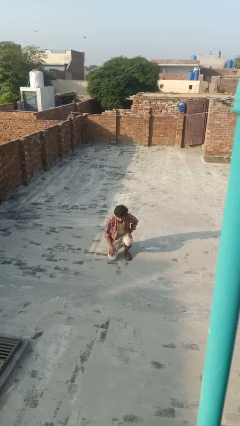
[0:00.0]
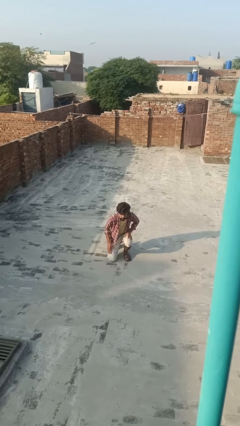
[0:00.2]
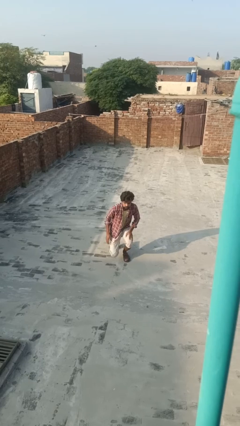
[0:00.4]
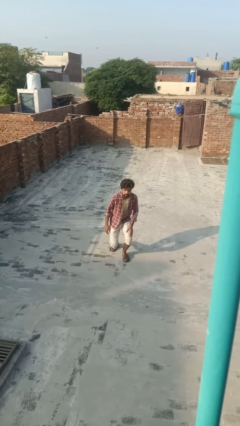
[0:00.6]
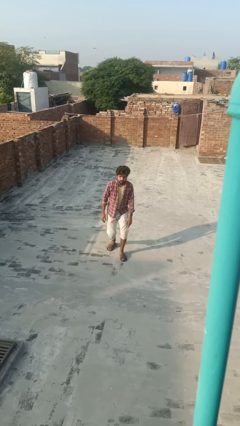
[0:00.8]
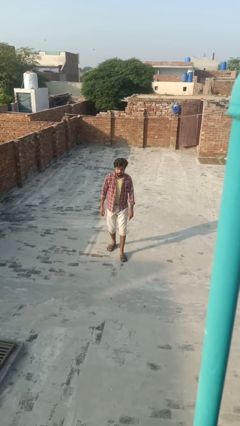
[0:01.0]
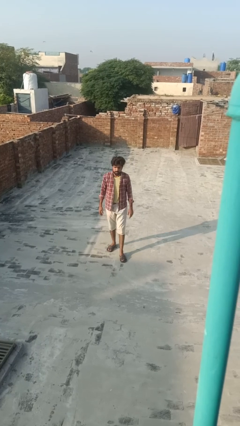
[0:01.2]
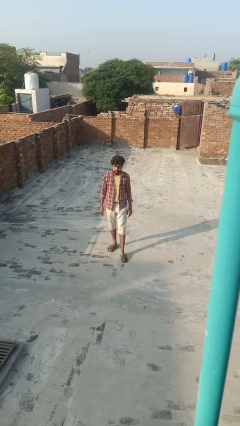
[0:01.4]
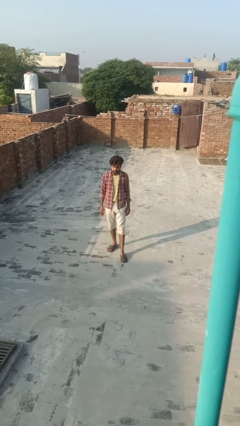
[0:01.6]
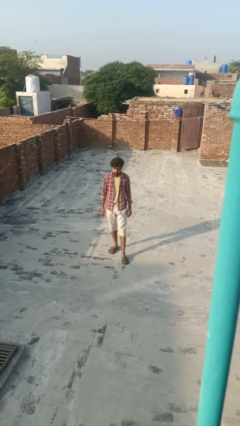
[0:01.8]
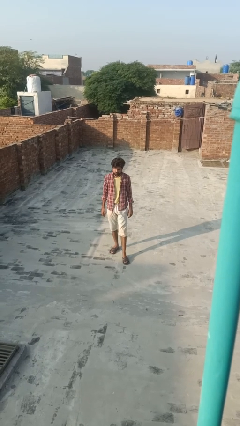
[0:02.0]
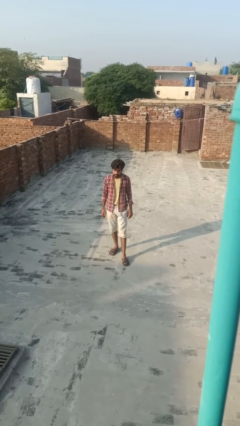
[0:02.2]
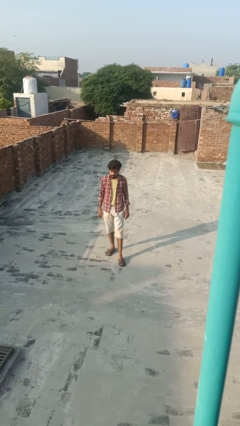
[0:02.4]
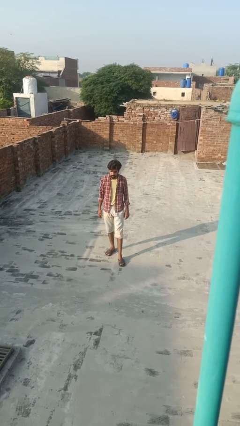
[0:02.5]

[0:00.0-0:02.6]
person stands up

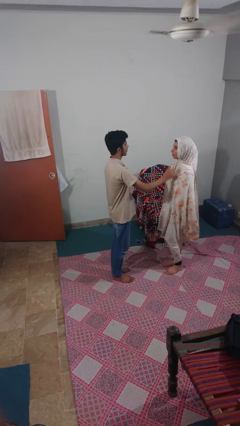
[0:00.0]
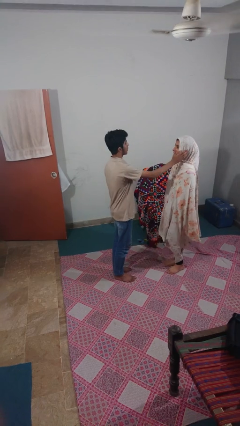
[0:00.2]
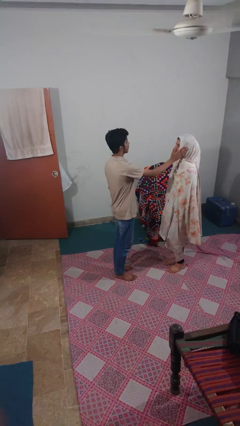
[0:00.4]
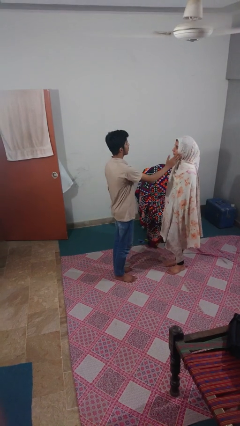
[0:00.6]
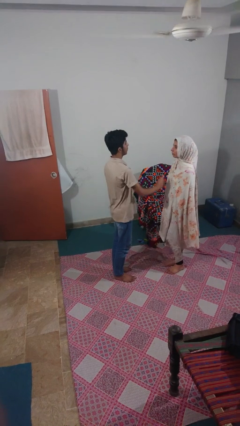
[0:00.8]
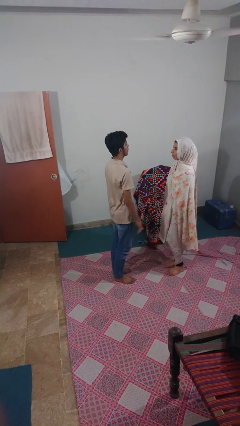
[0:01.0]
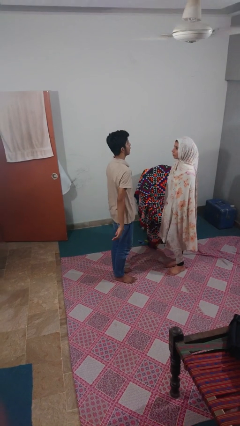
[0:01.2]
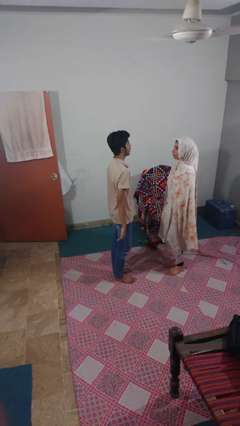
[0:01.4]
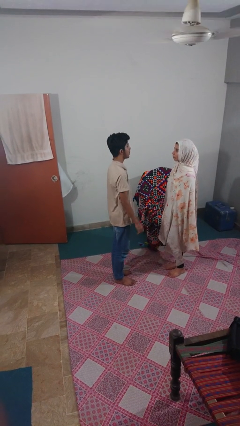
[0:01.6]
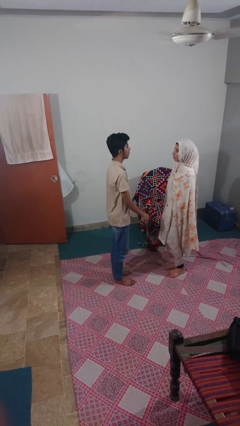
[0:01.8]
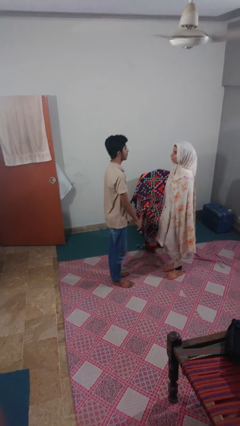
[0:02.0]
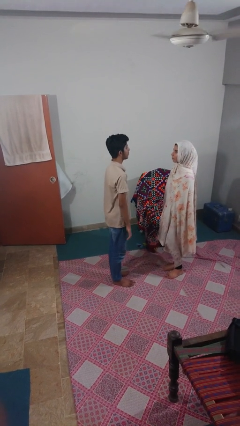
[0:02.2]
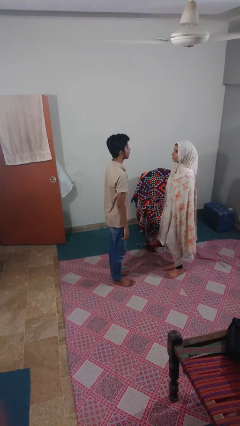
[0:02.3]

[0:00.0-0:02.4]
person touches face of person

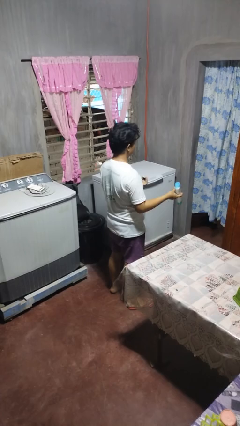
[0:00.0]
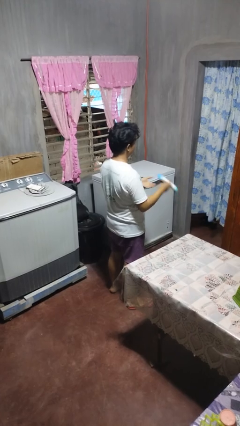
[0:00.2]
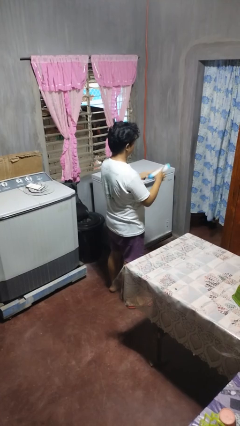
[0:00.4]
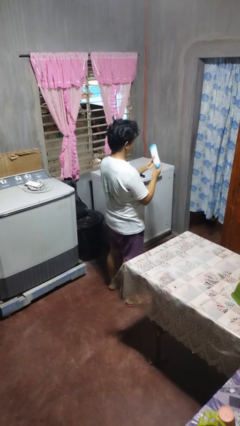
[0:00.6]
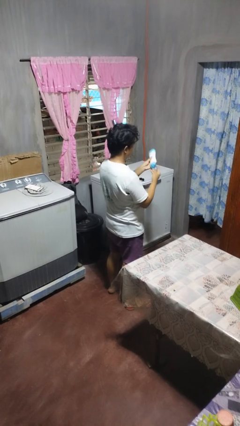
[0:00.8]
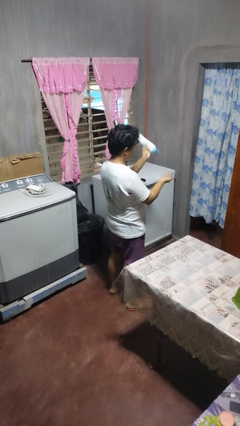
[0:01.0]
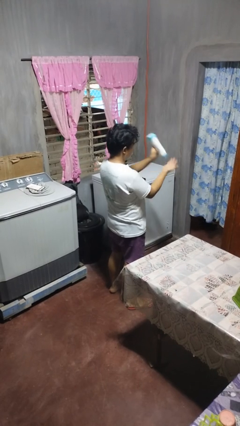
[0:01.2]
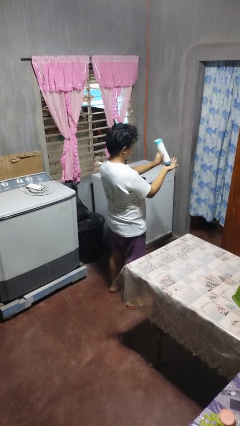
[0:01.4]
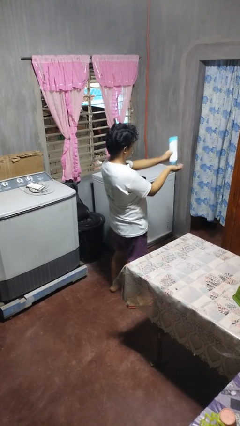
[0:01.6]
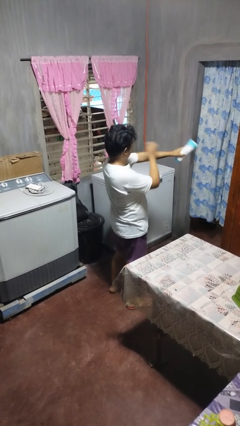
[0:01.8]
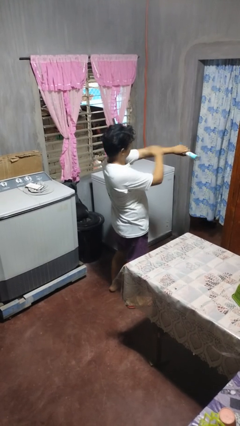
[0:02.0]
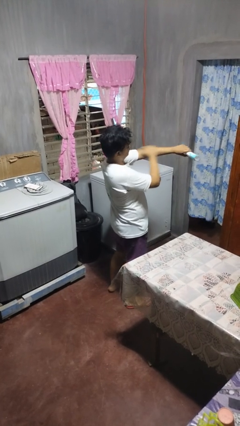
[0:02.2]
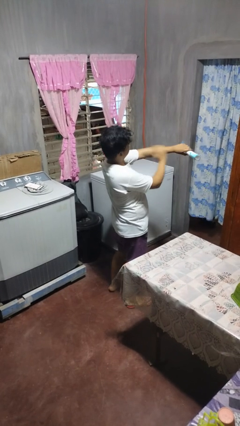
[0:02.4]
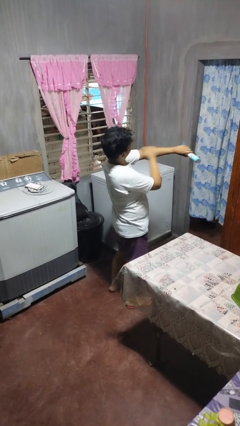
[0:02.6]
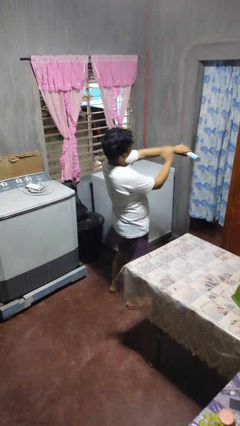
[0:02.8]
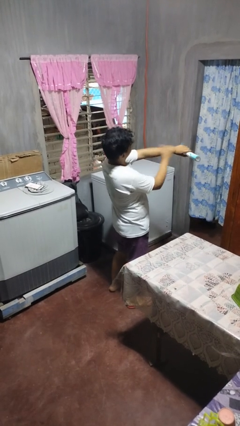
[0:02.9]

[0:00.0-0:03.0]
person applies sunscreen

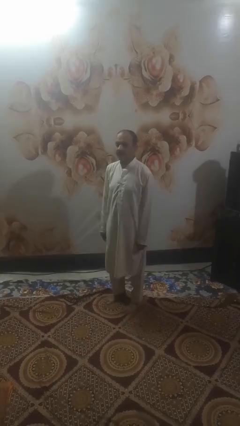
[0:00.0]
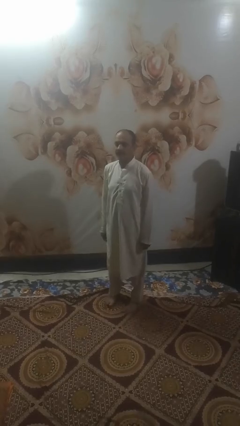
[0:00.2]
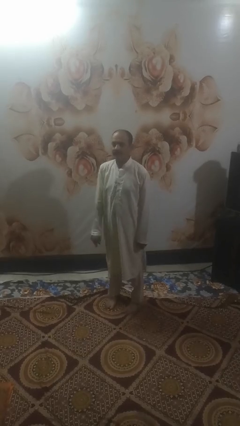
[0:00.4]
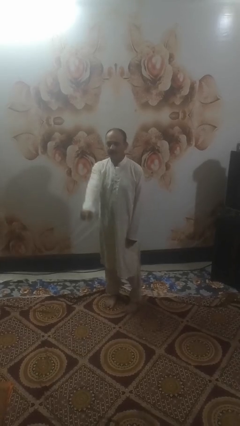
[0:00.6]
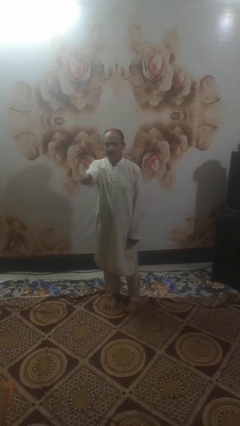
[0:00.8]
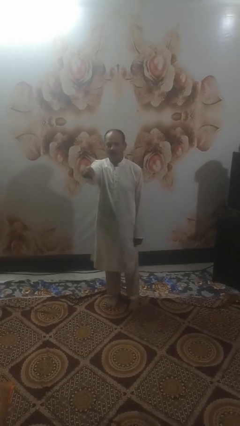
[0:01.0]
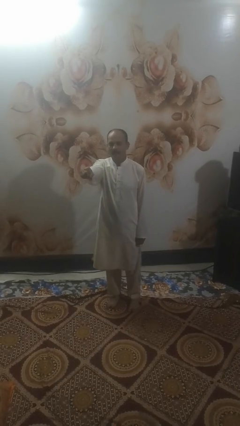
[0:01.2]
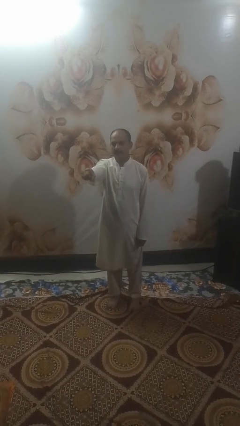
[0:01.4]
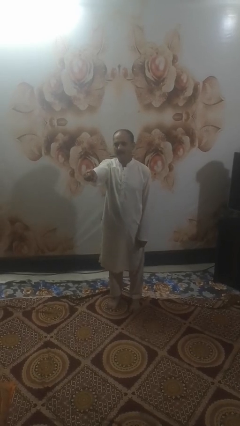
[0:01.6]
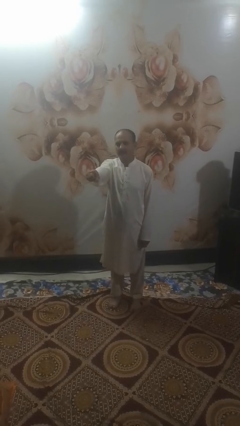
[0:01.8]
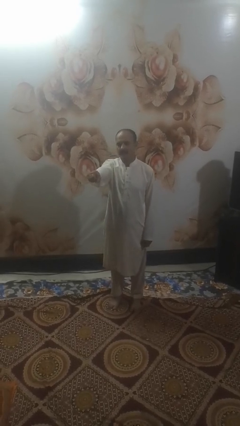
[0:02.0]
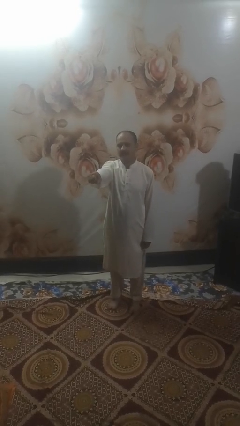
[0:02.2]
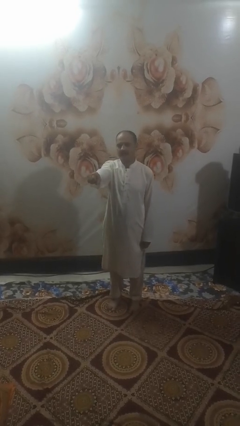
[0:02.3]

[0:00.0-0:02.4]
person points at person

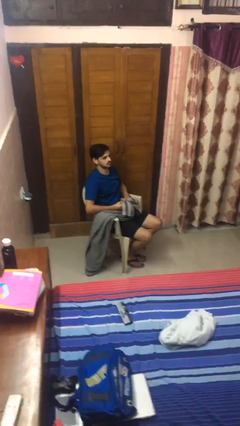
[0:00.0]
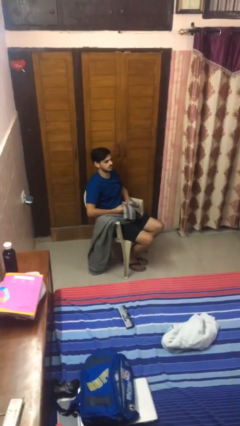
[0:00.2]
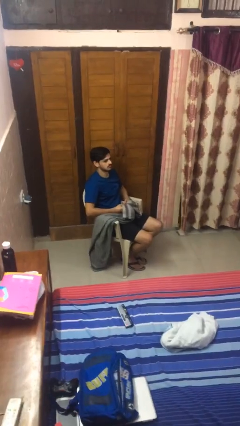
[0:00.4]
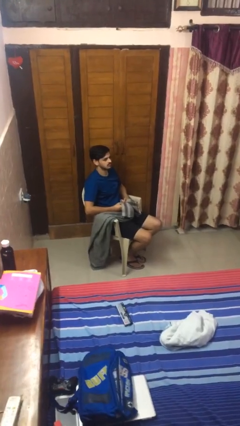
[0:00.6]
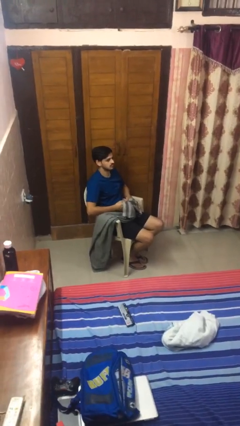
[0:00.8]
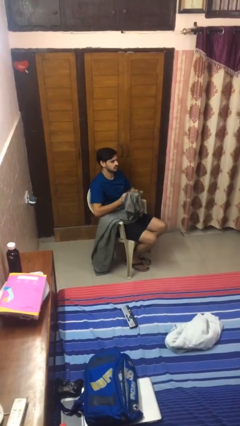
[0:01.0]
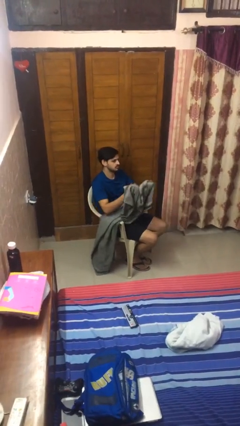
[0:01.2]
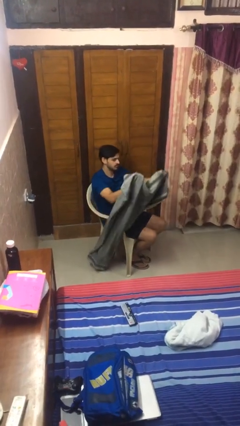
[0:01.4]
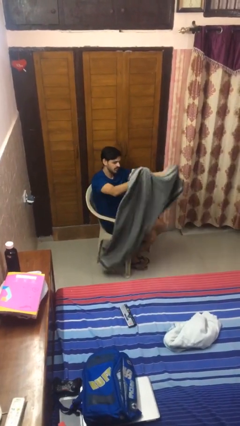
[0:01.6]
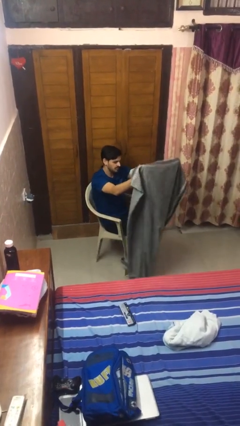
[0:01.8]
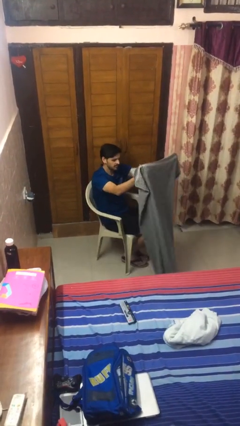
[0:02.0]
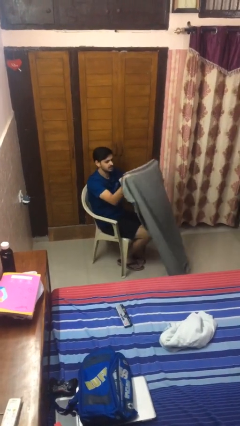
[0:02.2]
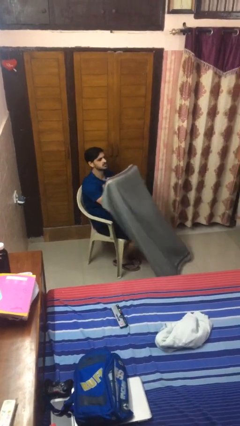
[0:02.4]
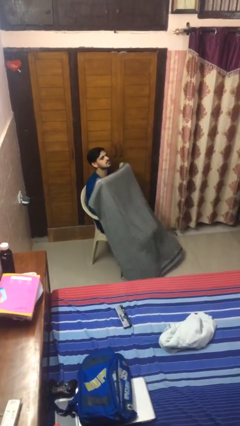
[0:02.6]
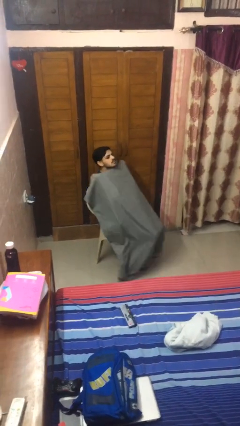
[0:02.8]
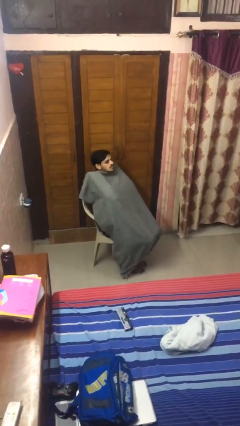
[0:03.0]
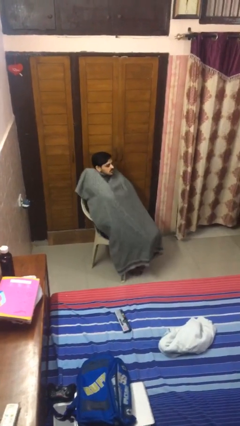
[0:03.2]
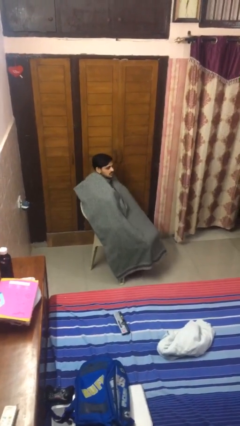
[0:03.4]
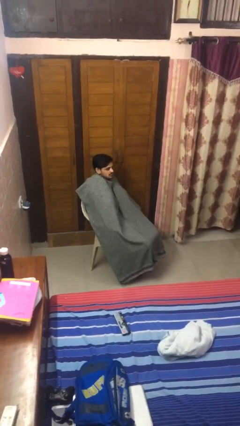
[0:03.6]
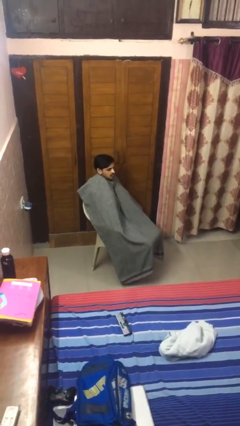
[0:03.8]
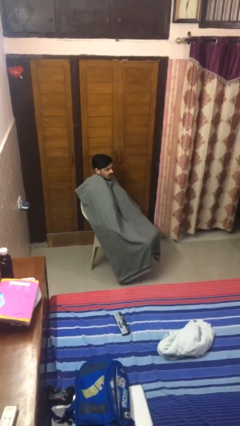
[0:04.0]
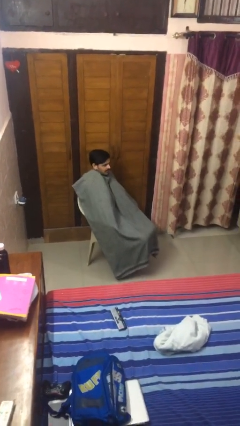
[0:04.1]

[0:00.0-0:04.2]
person covers with blanket

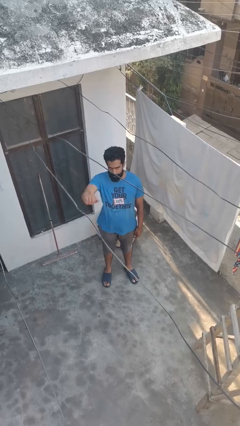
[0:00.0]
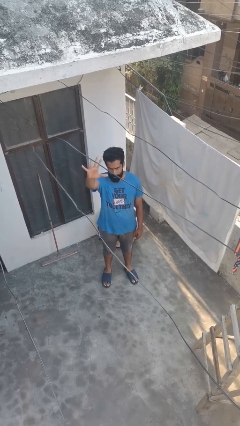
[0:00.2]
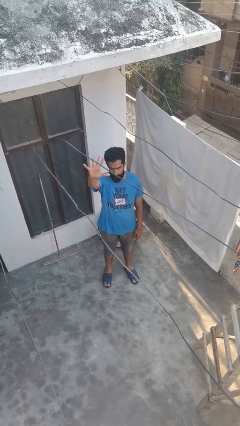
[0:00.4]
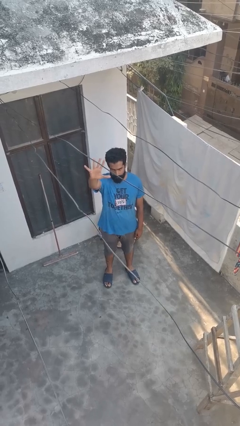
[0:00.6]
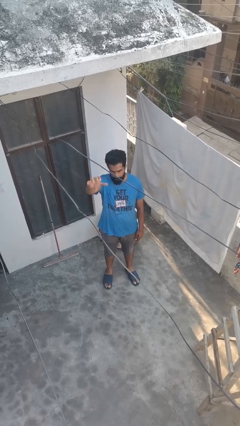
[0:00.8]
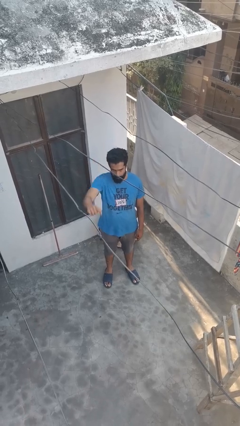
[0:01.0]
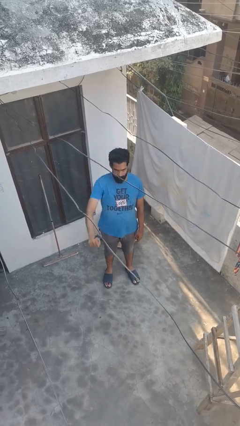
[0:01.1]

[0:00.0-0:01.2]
person gestures number five

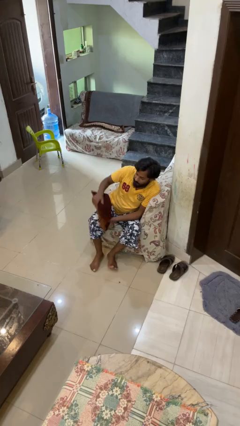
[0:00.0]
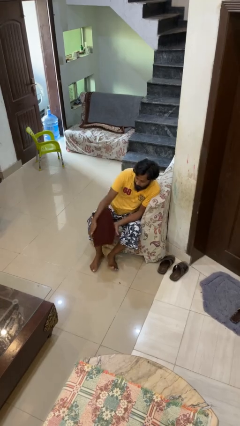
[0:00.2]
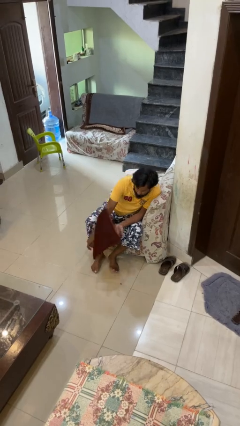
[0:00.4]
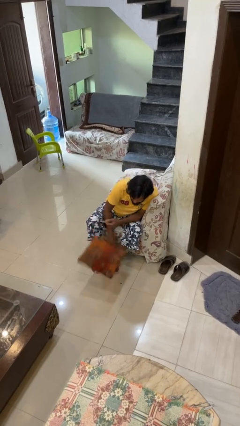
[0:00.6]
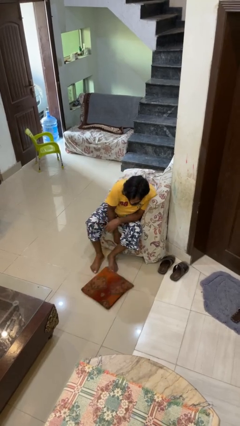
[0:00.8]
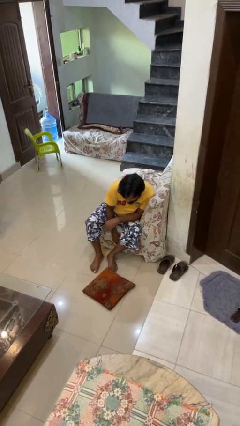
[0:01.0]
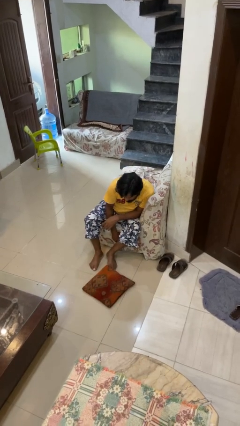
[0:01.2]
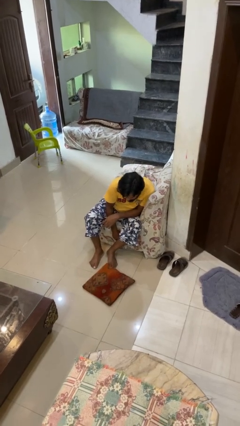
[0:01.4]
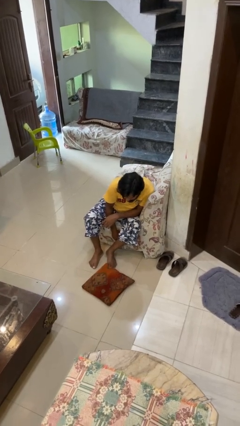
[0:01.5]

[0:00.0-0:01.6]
person drops object
